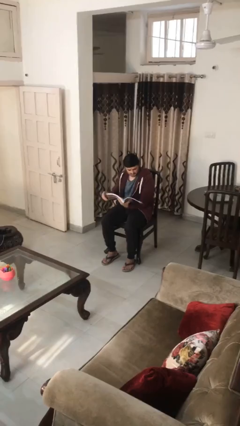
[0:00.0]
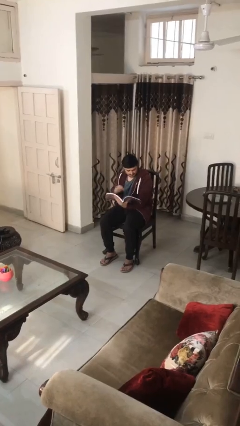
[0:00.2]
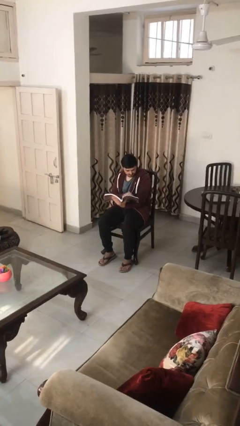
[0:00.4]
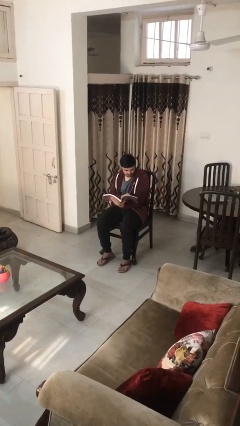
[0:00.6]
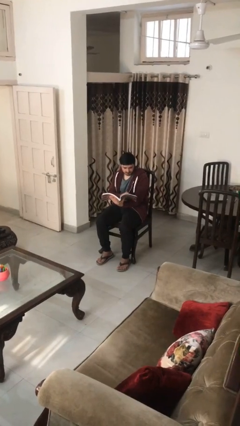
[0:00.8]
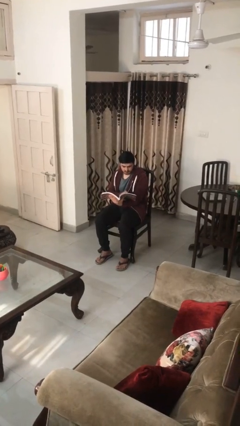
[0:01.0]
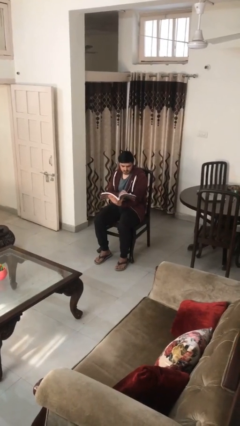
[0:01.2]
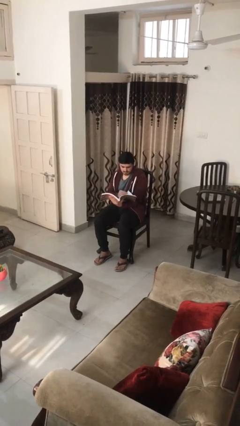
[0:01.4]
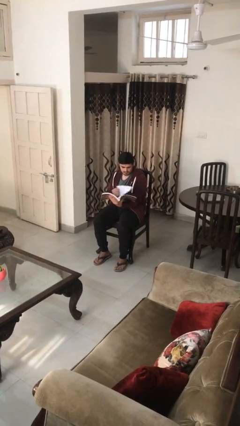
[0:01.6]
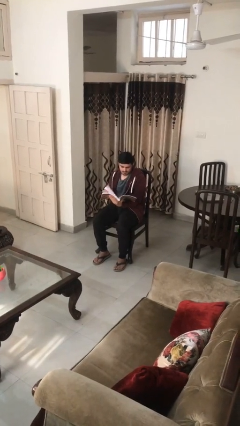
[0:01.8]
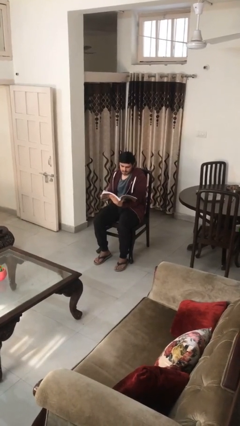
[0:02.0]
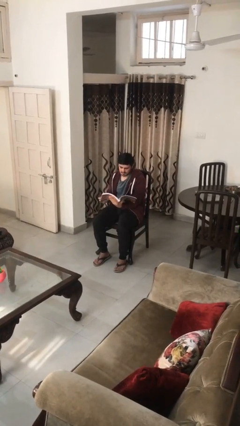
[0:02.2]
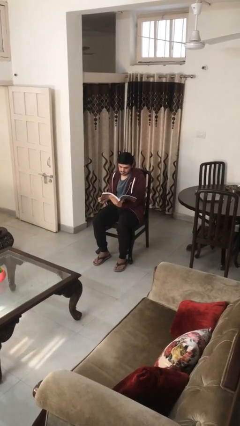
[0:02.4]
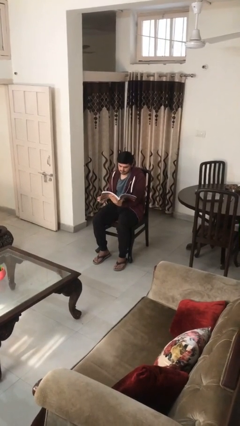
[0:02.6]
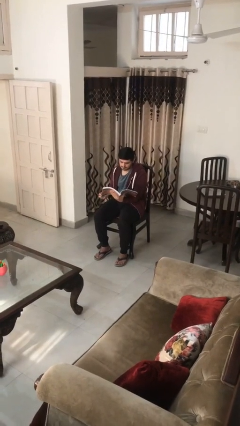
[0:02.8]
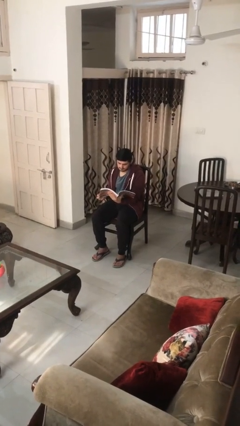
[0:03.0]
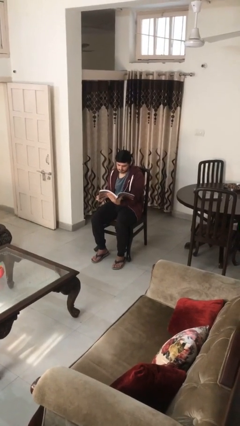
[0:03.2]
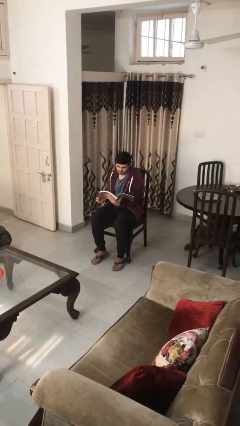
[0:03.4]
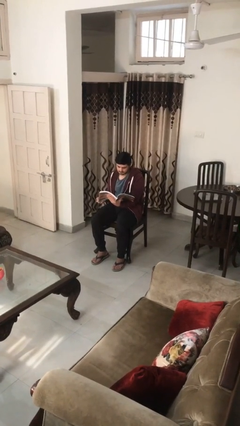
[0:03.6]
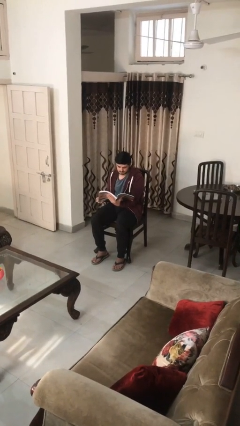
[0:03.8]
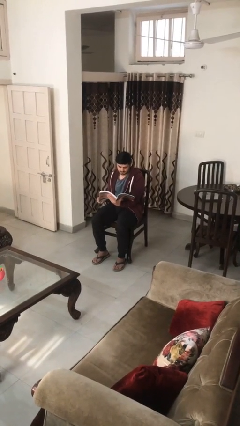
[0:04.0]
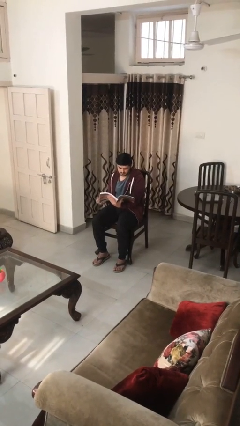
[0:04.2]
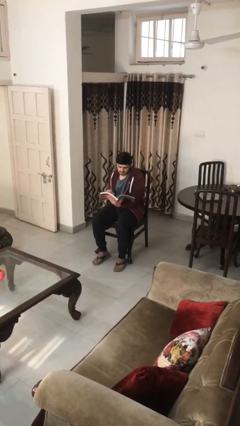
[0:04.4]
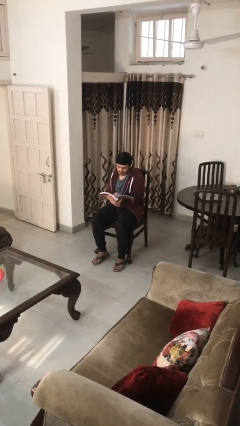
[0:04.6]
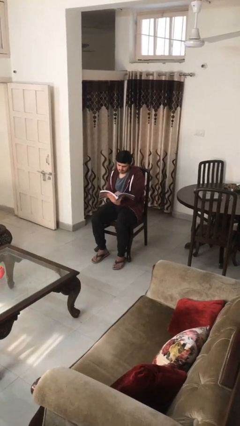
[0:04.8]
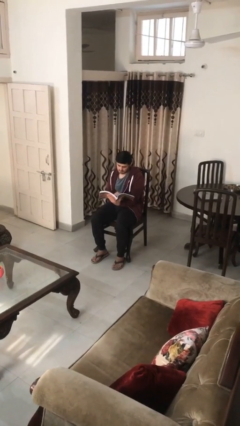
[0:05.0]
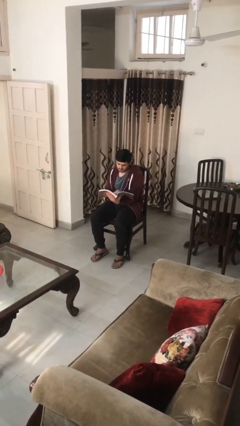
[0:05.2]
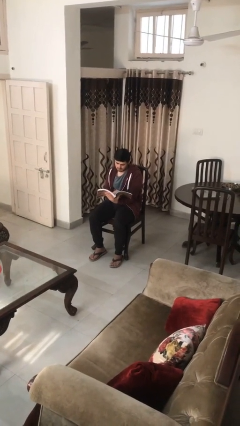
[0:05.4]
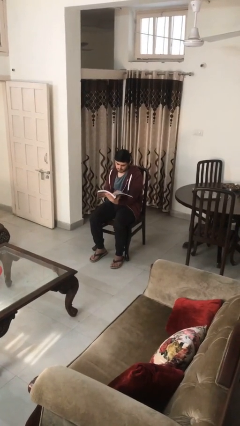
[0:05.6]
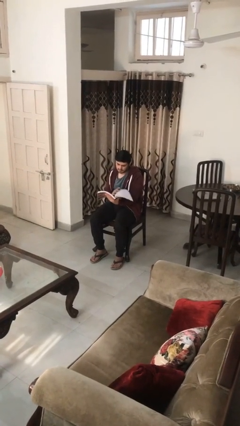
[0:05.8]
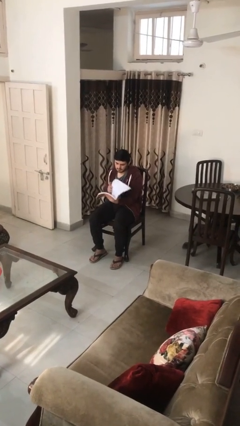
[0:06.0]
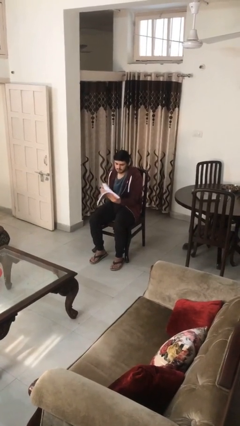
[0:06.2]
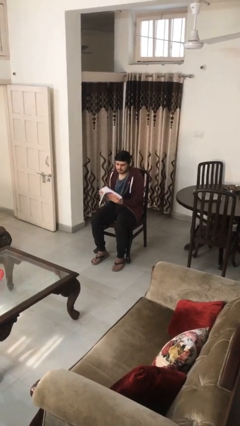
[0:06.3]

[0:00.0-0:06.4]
person reads document

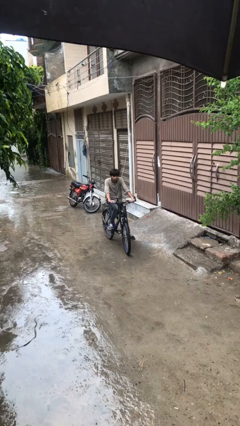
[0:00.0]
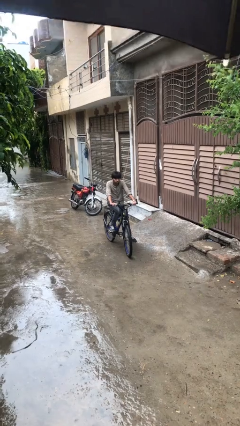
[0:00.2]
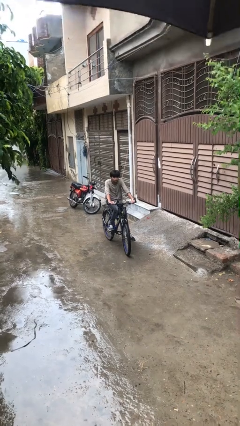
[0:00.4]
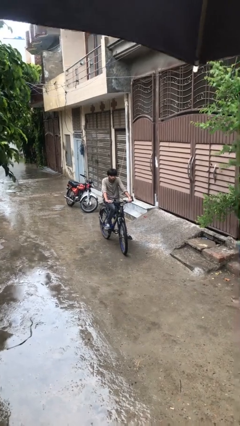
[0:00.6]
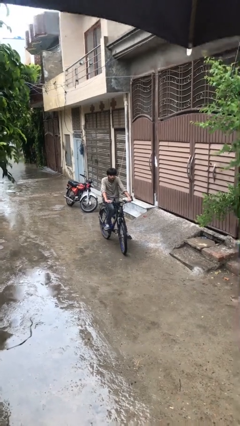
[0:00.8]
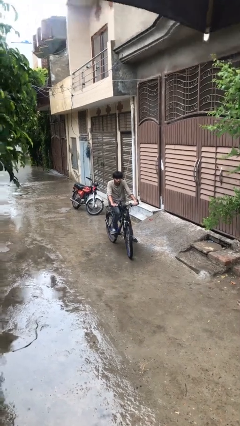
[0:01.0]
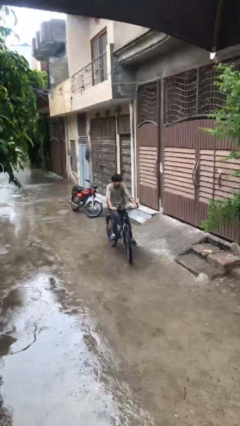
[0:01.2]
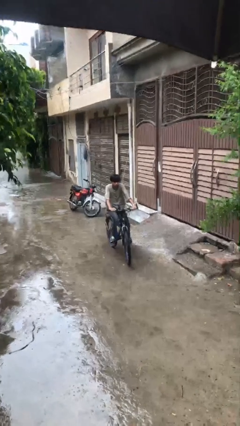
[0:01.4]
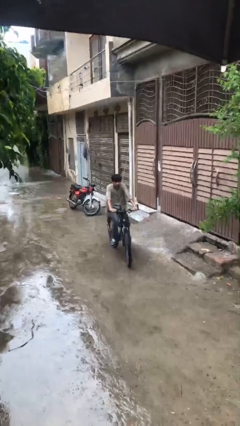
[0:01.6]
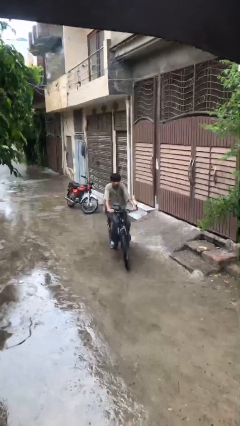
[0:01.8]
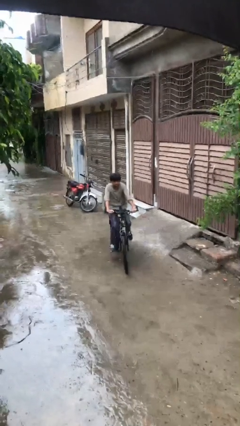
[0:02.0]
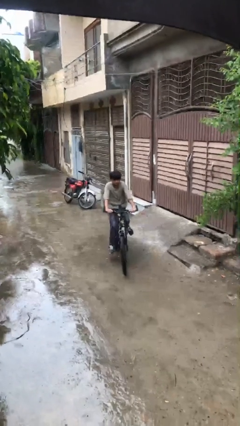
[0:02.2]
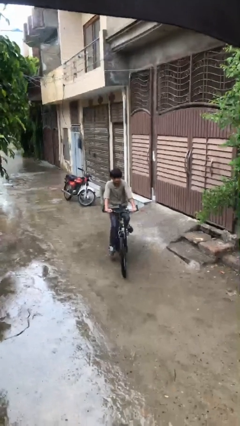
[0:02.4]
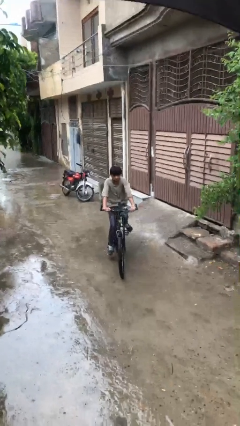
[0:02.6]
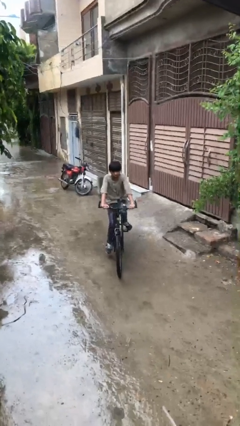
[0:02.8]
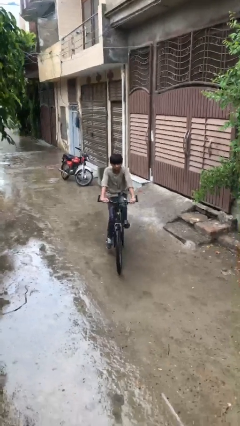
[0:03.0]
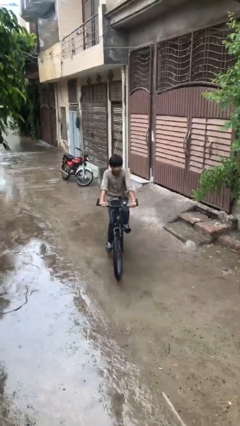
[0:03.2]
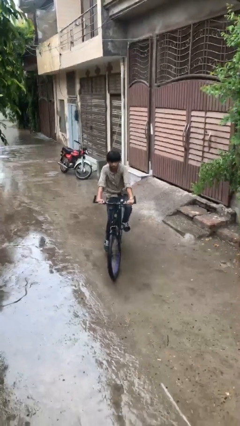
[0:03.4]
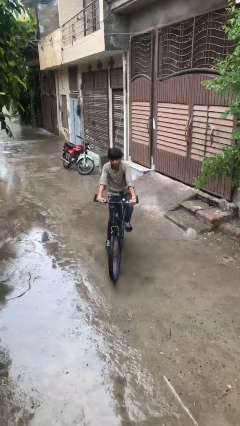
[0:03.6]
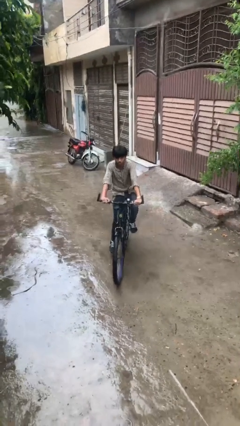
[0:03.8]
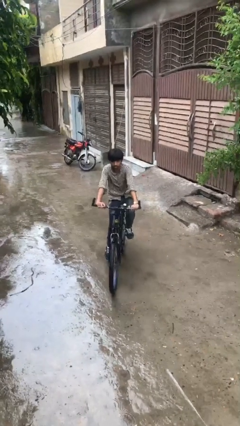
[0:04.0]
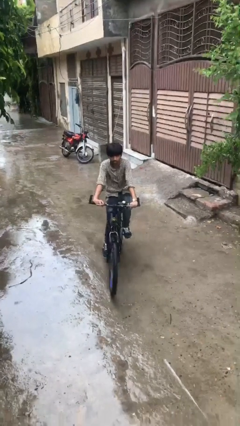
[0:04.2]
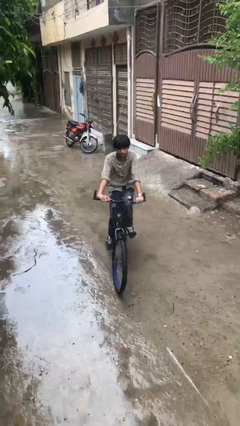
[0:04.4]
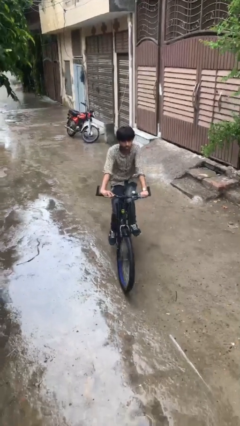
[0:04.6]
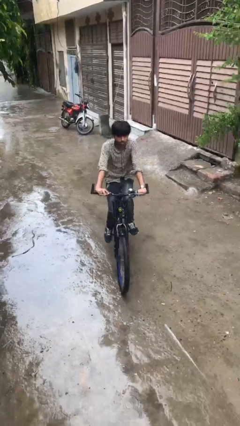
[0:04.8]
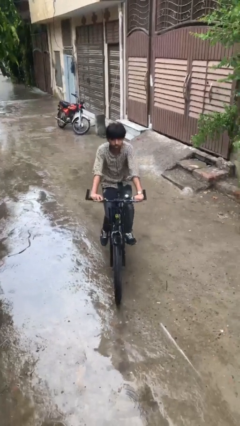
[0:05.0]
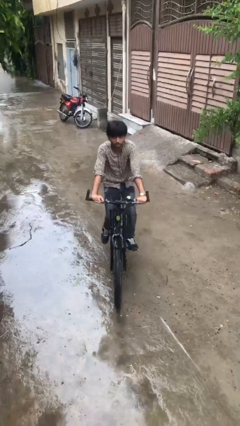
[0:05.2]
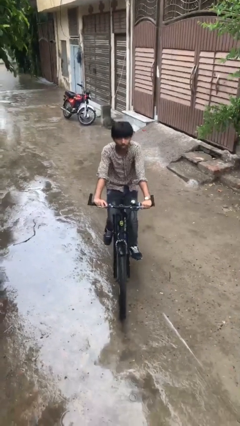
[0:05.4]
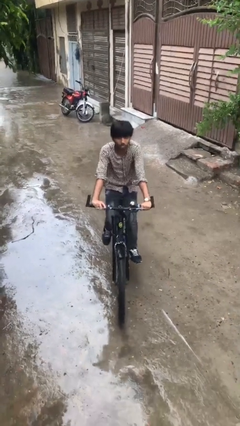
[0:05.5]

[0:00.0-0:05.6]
person rides bicycle

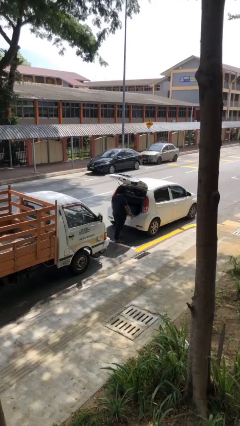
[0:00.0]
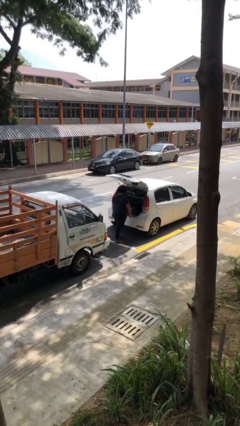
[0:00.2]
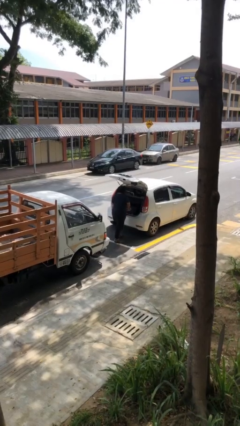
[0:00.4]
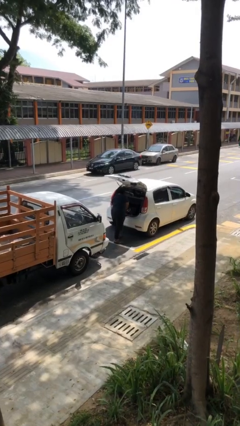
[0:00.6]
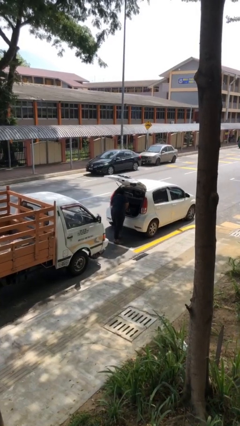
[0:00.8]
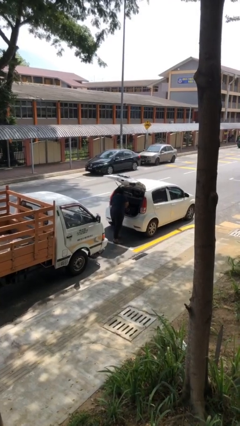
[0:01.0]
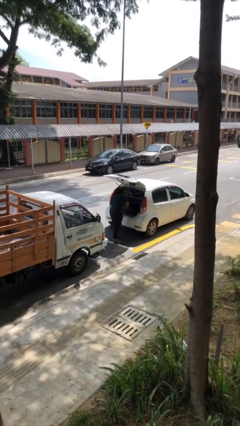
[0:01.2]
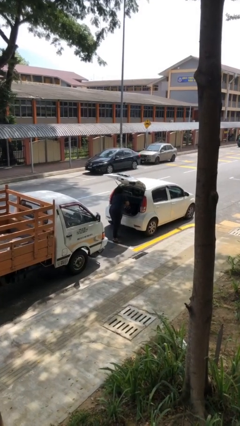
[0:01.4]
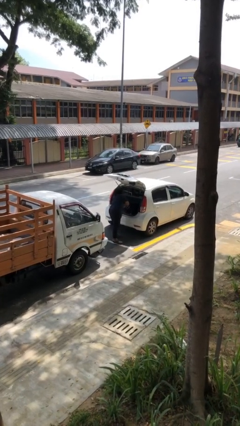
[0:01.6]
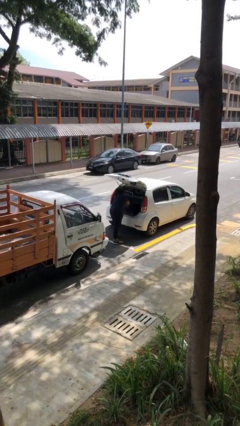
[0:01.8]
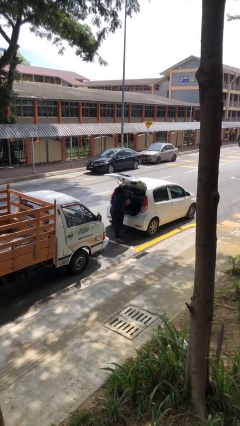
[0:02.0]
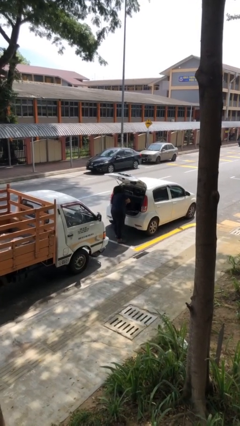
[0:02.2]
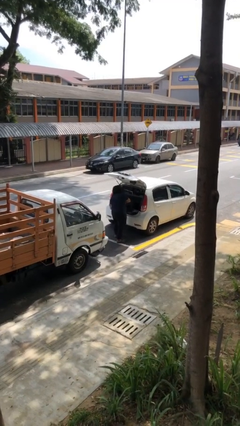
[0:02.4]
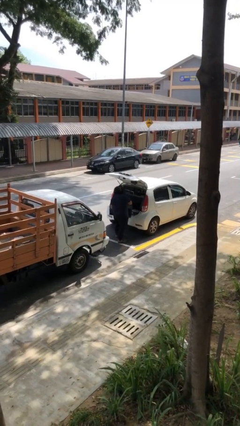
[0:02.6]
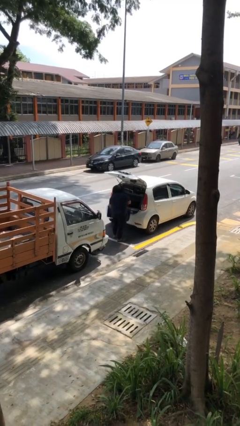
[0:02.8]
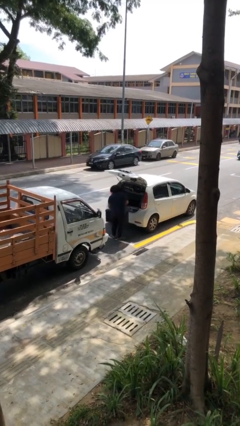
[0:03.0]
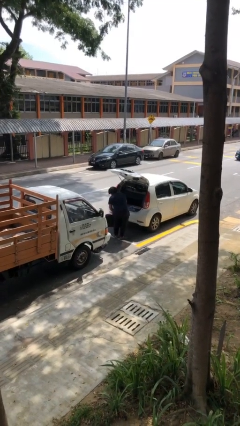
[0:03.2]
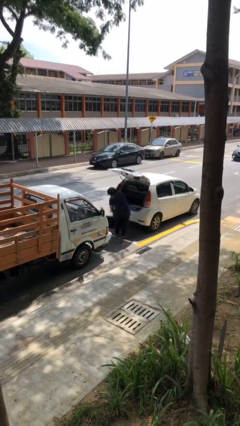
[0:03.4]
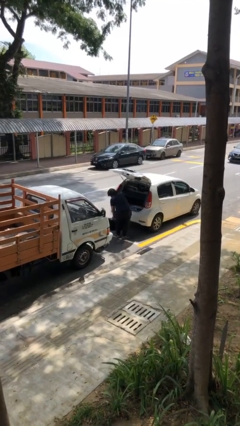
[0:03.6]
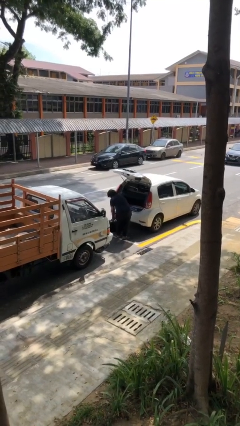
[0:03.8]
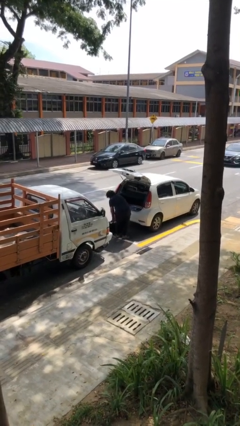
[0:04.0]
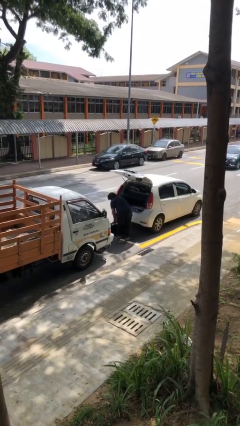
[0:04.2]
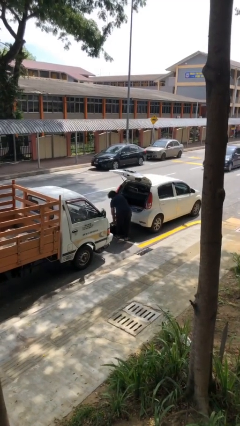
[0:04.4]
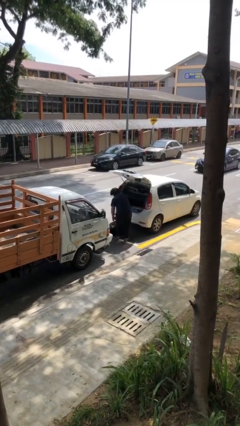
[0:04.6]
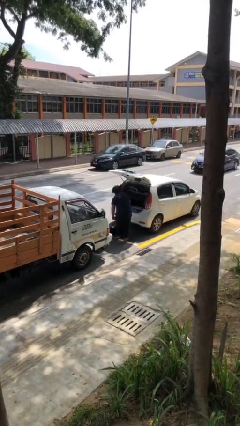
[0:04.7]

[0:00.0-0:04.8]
person unloads car

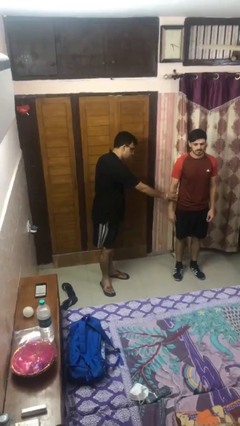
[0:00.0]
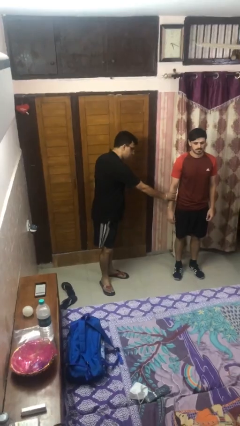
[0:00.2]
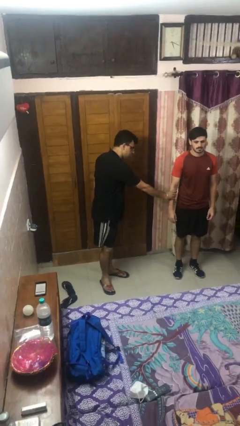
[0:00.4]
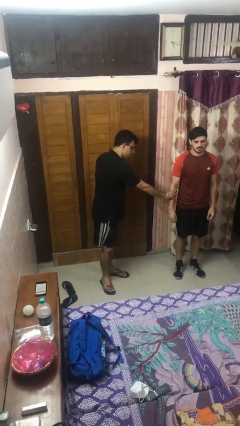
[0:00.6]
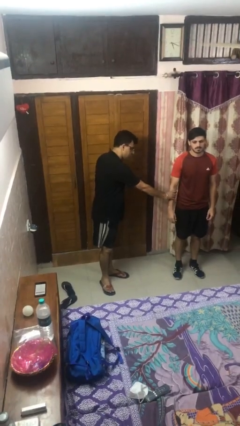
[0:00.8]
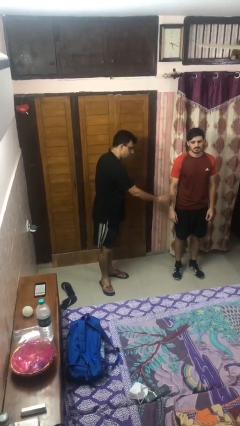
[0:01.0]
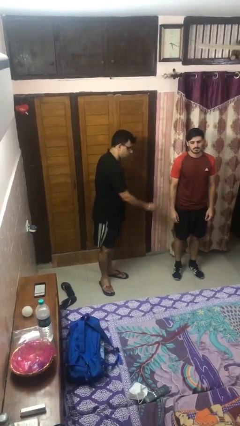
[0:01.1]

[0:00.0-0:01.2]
person grabs person by forearm
